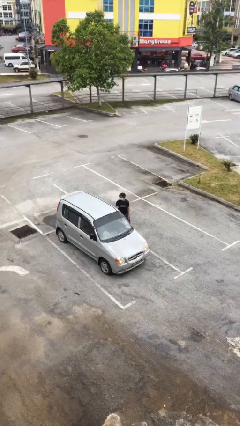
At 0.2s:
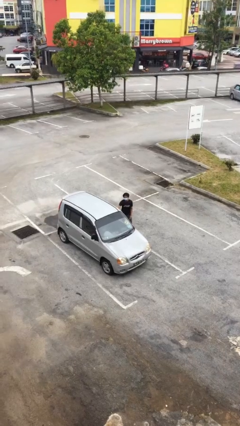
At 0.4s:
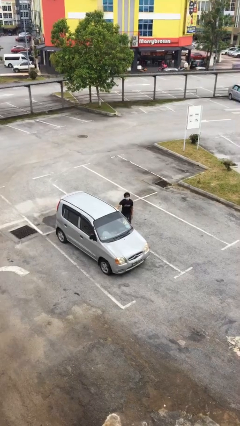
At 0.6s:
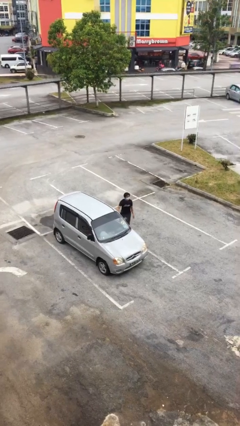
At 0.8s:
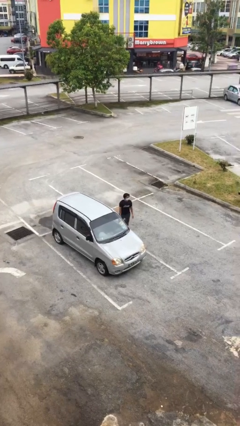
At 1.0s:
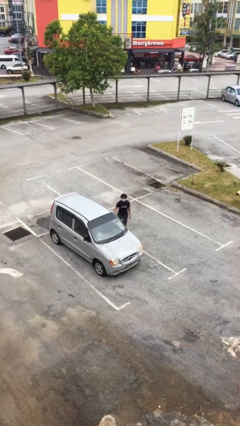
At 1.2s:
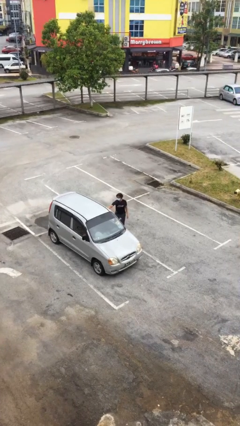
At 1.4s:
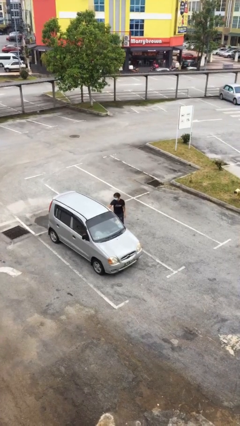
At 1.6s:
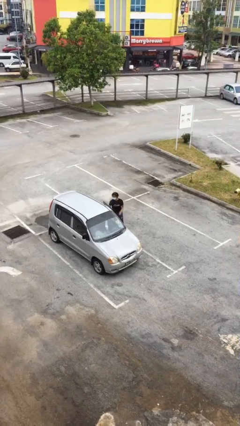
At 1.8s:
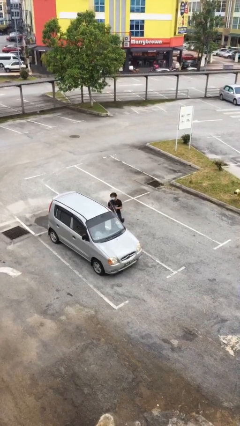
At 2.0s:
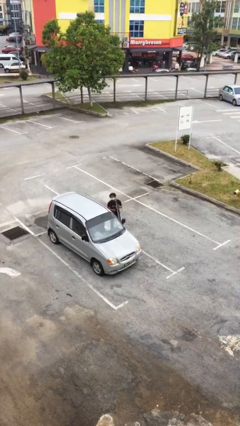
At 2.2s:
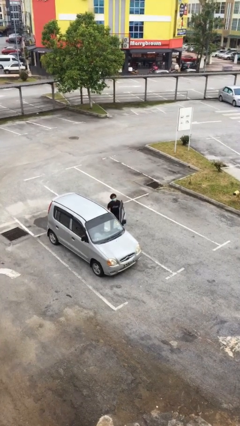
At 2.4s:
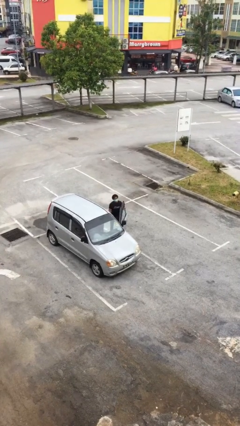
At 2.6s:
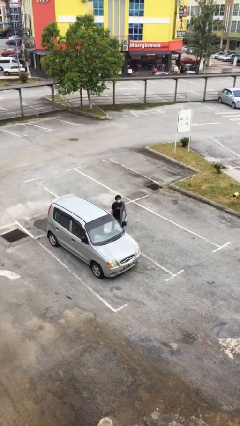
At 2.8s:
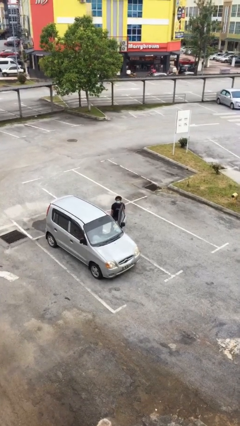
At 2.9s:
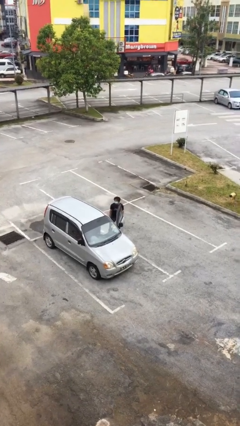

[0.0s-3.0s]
person opens car door

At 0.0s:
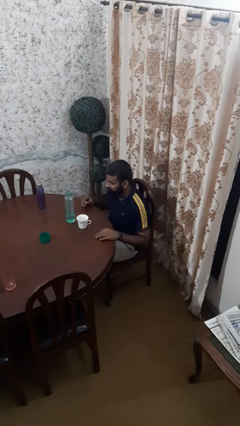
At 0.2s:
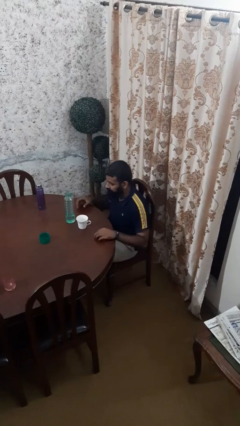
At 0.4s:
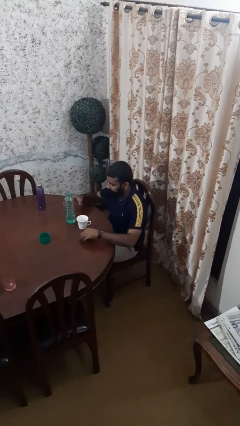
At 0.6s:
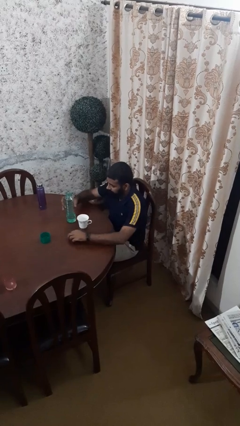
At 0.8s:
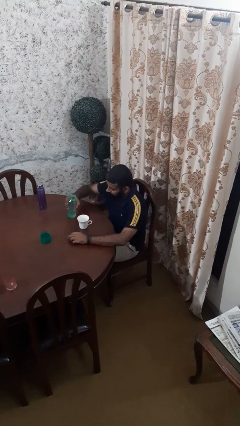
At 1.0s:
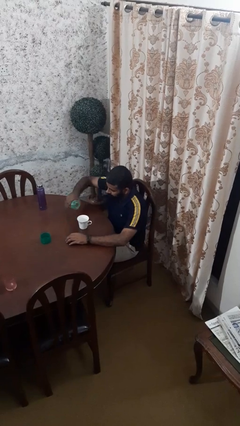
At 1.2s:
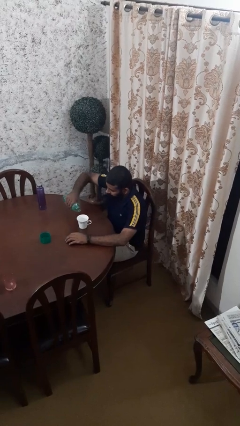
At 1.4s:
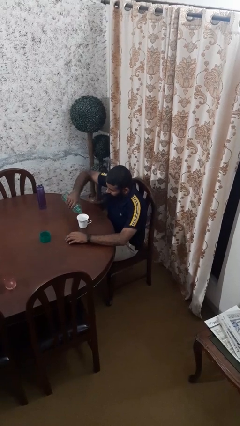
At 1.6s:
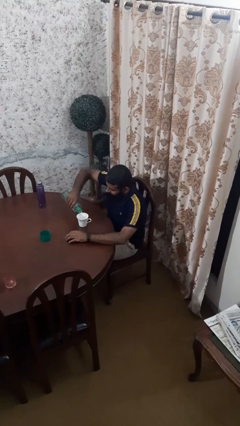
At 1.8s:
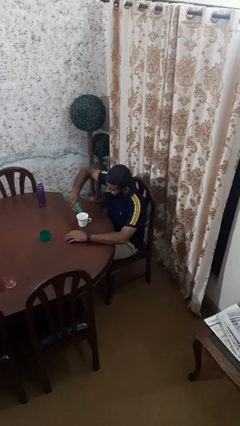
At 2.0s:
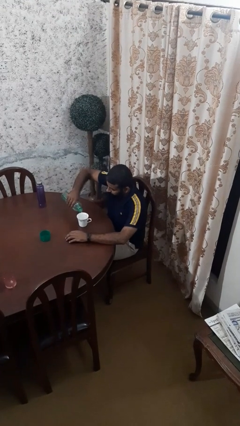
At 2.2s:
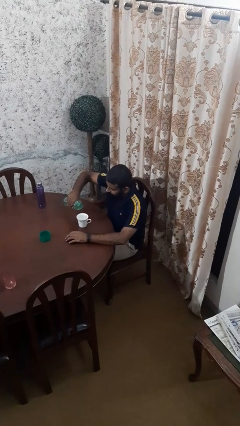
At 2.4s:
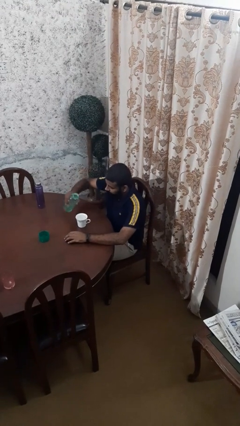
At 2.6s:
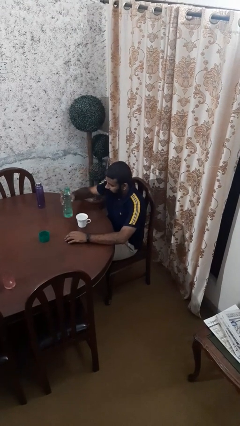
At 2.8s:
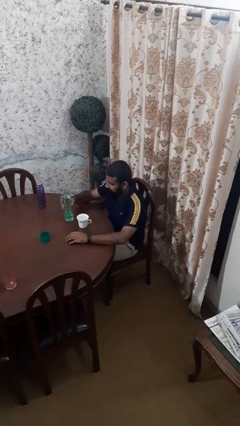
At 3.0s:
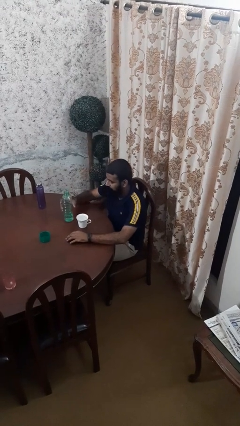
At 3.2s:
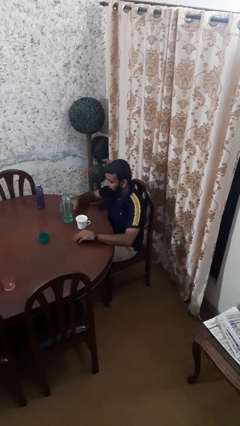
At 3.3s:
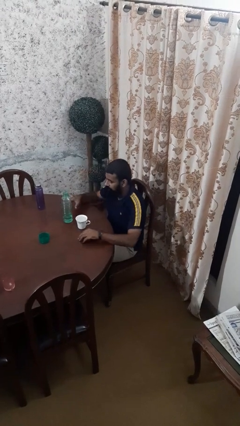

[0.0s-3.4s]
person pours liquid into cup

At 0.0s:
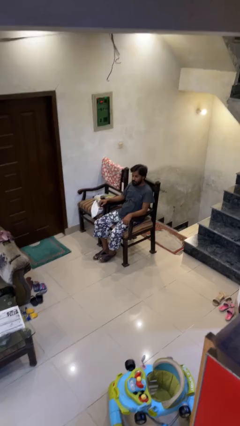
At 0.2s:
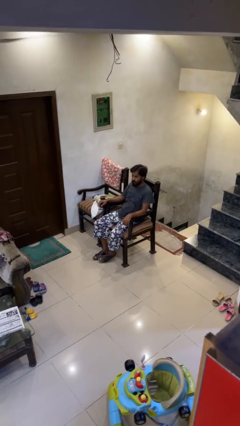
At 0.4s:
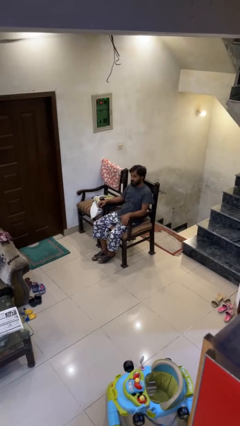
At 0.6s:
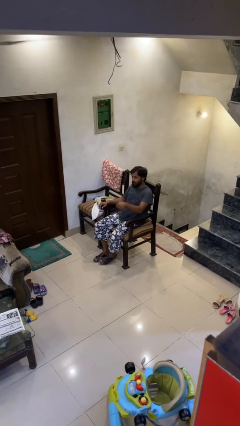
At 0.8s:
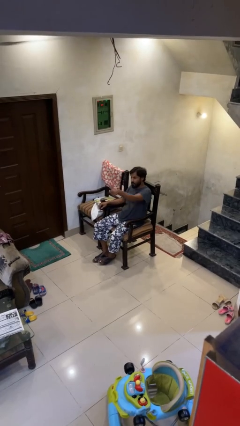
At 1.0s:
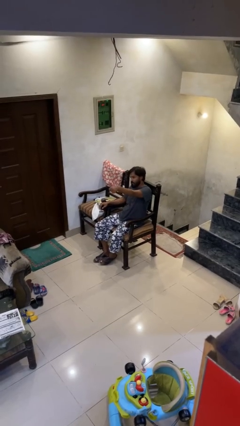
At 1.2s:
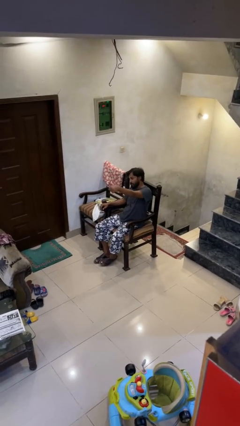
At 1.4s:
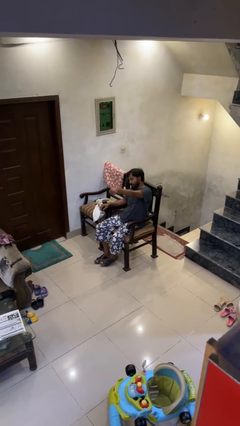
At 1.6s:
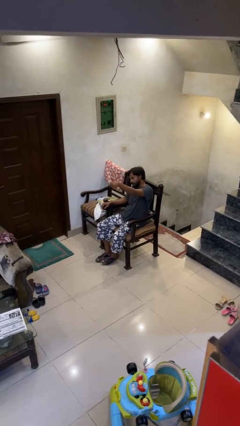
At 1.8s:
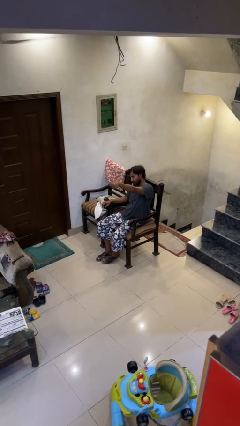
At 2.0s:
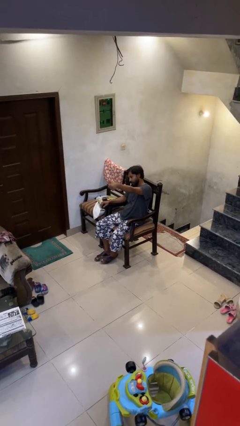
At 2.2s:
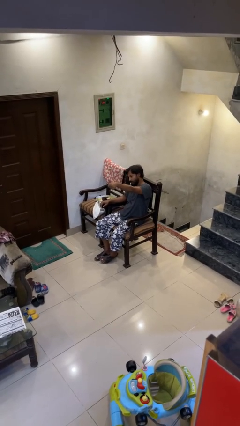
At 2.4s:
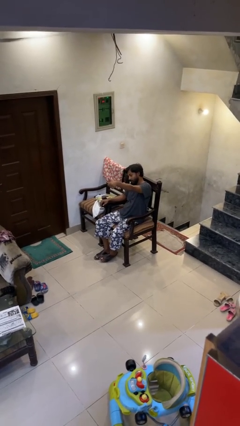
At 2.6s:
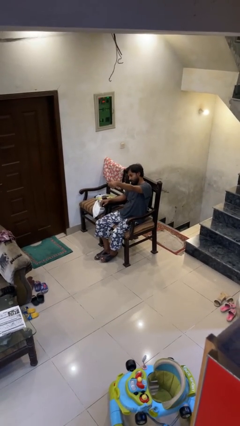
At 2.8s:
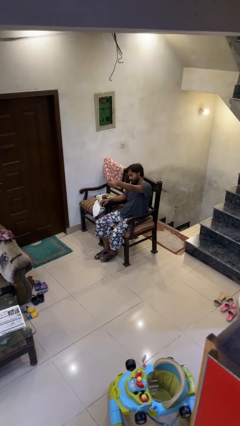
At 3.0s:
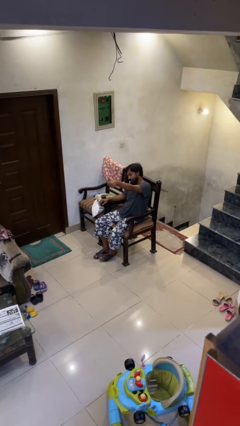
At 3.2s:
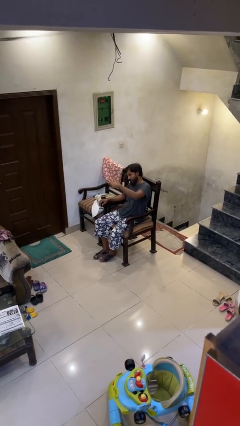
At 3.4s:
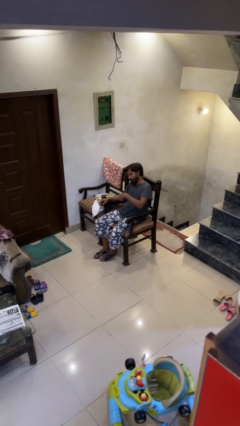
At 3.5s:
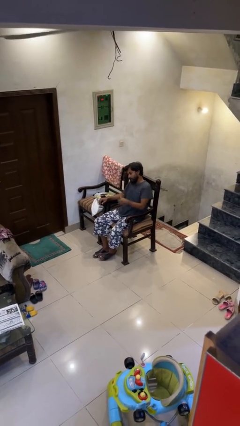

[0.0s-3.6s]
person gestures thumbs up

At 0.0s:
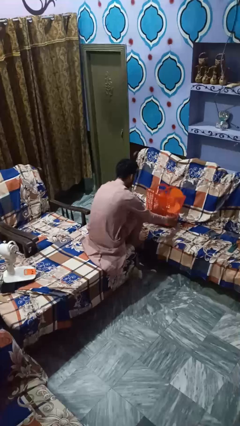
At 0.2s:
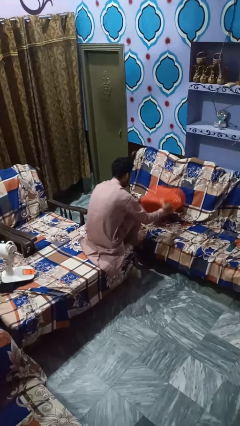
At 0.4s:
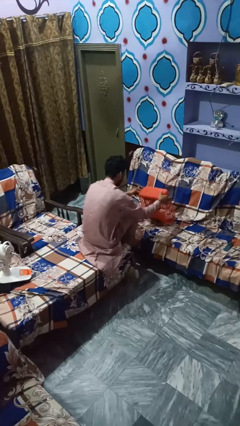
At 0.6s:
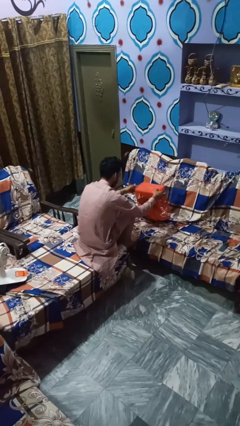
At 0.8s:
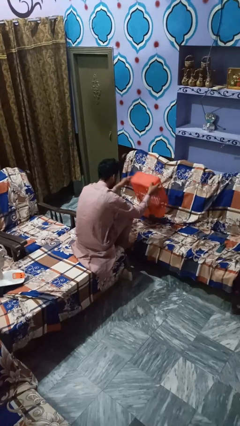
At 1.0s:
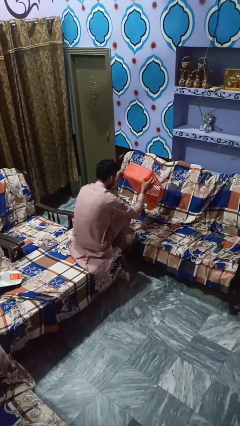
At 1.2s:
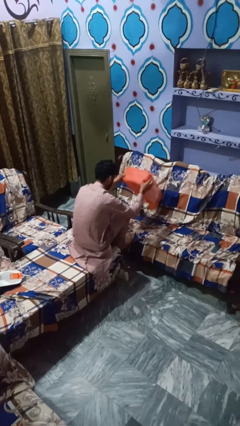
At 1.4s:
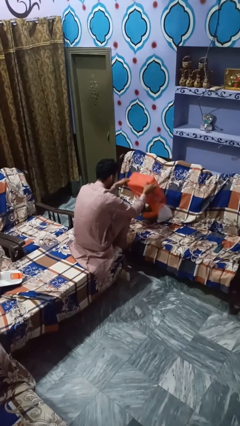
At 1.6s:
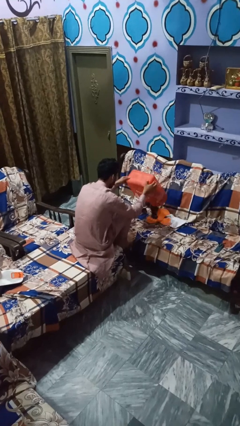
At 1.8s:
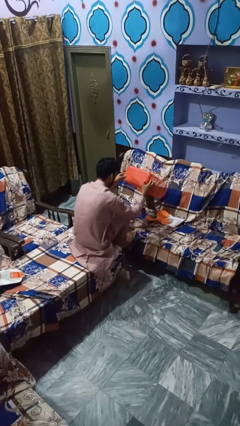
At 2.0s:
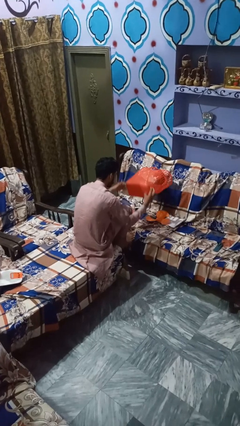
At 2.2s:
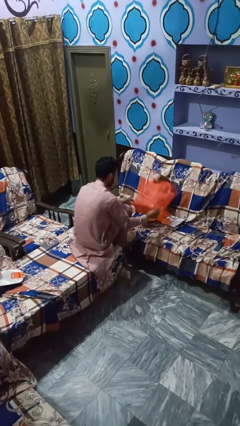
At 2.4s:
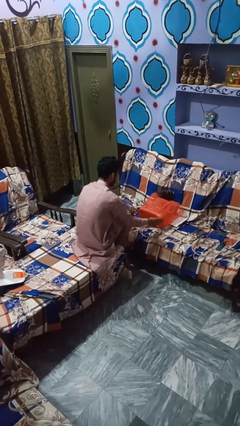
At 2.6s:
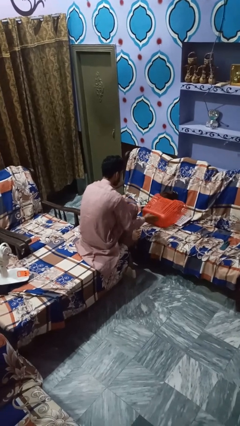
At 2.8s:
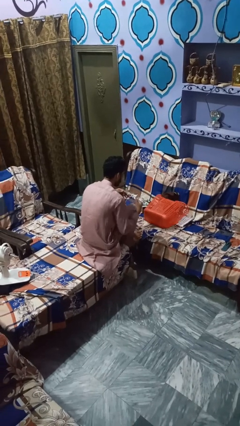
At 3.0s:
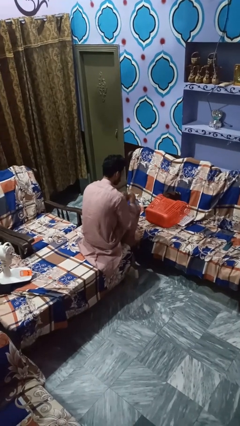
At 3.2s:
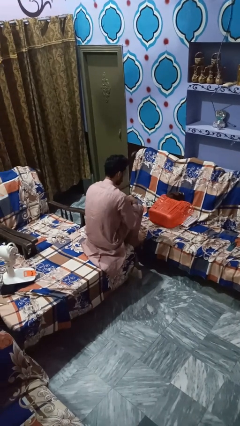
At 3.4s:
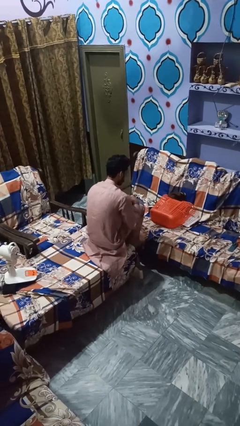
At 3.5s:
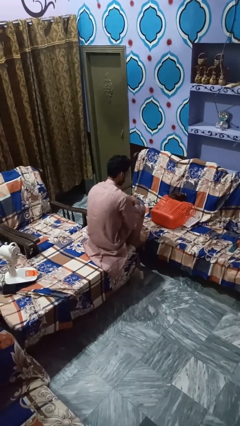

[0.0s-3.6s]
person removes trashbag from trashcan

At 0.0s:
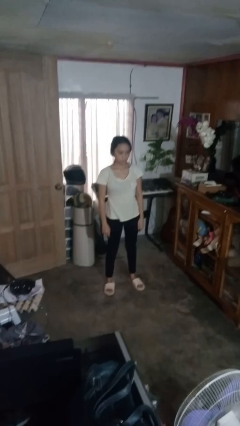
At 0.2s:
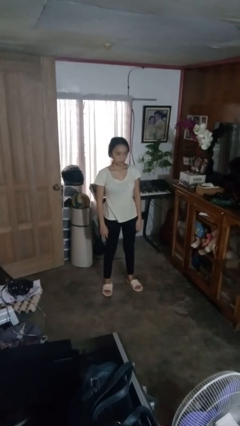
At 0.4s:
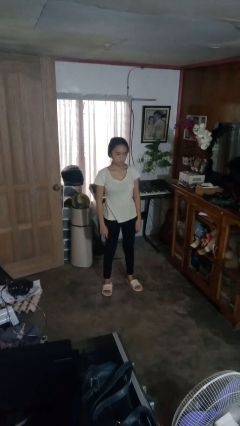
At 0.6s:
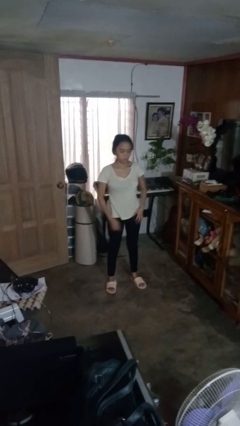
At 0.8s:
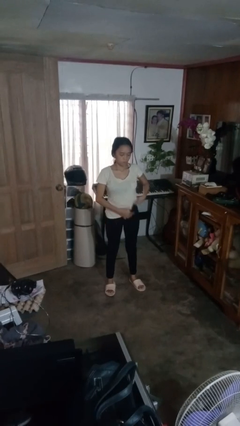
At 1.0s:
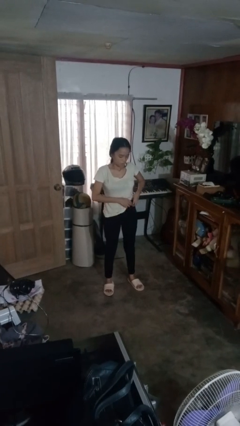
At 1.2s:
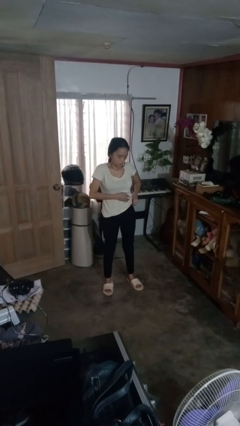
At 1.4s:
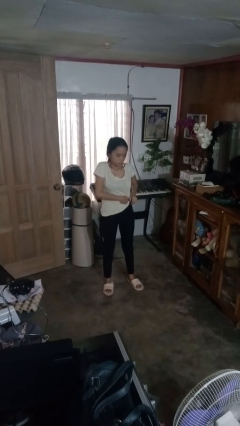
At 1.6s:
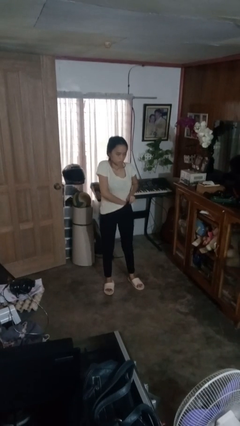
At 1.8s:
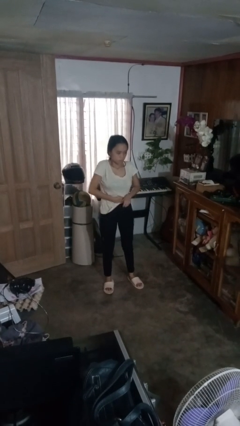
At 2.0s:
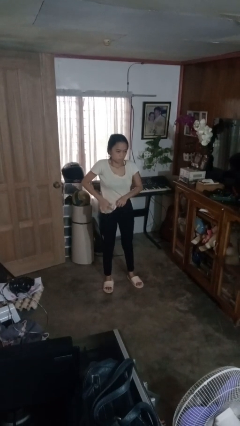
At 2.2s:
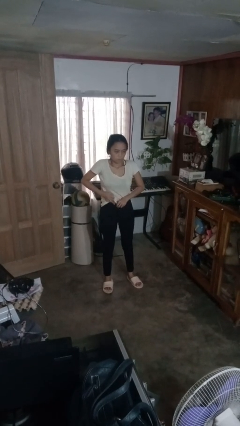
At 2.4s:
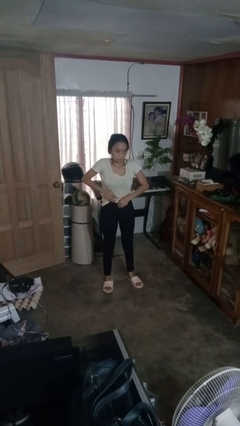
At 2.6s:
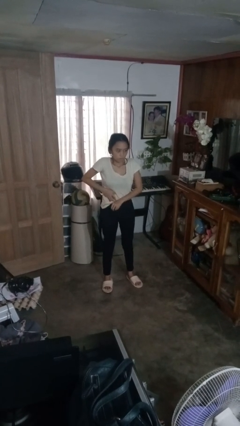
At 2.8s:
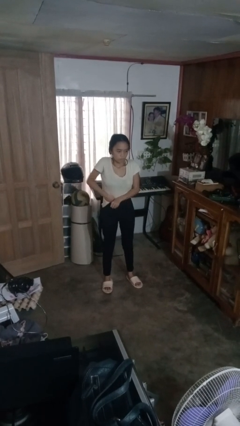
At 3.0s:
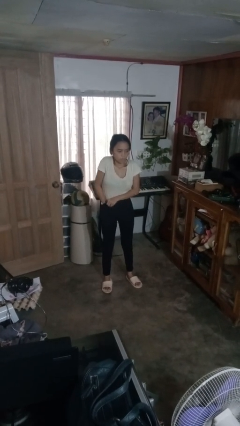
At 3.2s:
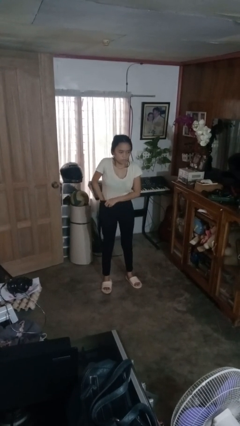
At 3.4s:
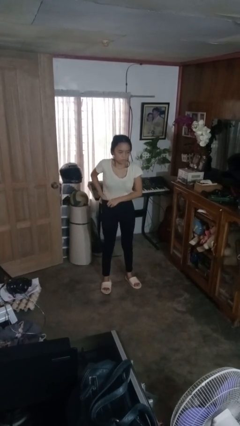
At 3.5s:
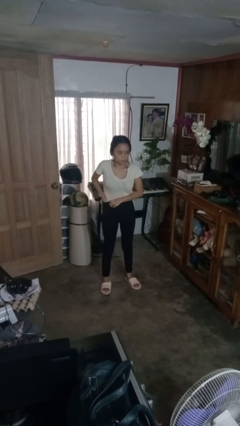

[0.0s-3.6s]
person tucks in shirt

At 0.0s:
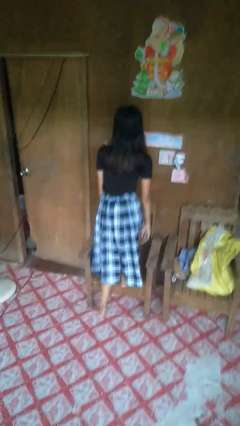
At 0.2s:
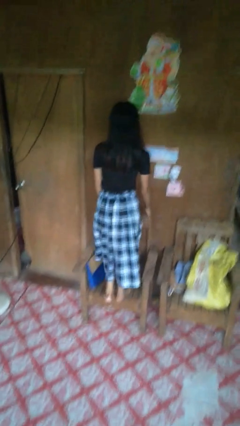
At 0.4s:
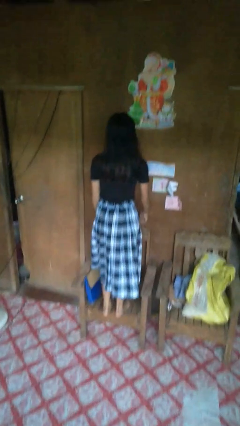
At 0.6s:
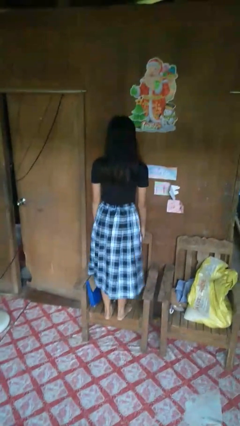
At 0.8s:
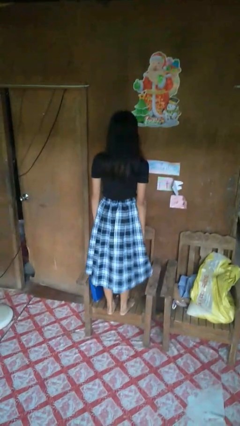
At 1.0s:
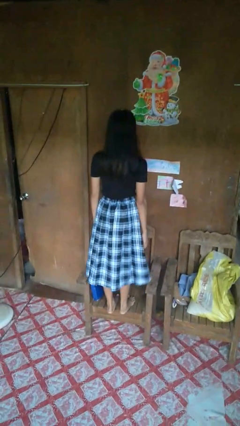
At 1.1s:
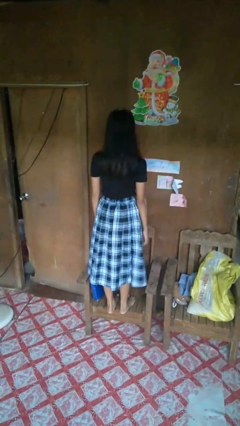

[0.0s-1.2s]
person climbs on chair
